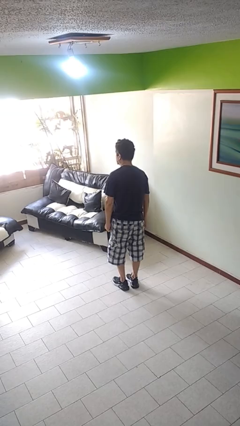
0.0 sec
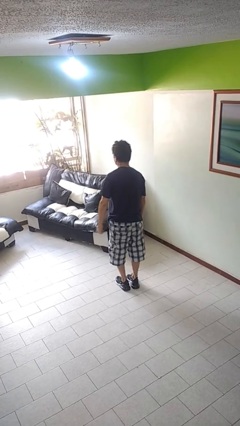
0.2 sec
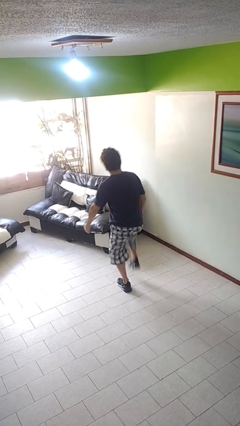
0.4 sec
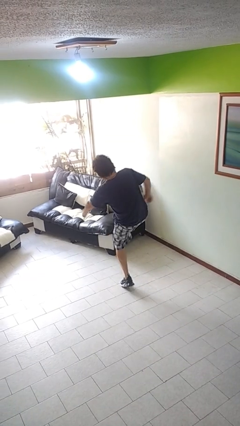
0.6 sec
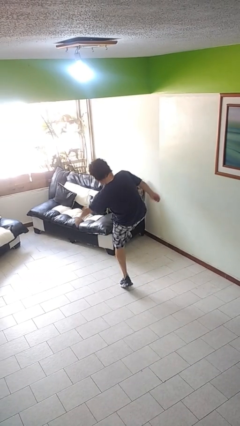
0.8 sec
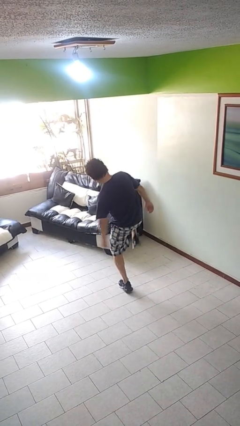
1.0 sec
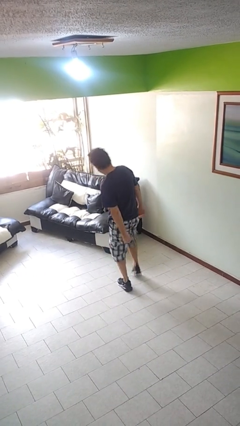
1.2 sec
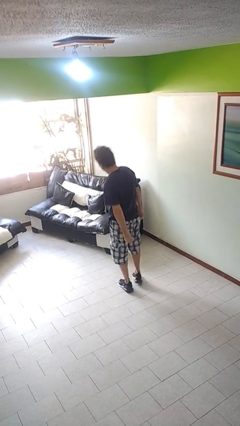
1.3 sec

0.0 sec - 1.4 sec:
person karate kicks

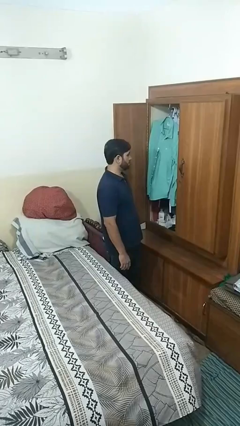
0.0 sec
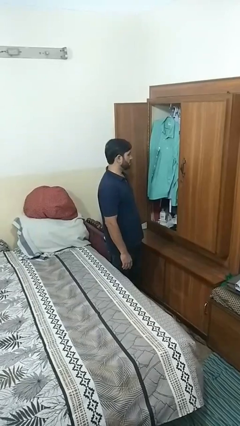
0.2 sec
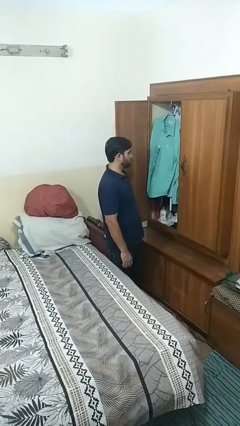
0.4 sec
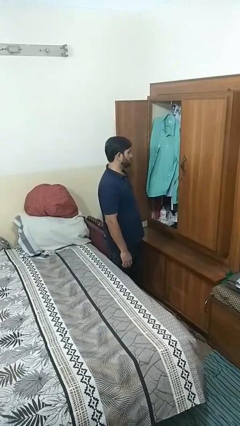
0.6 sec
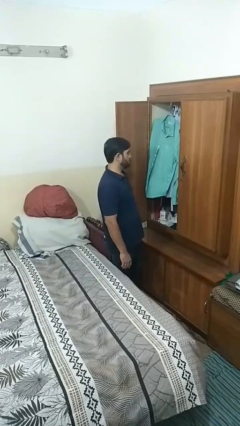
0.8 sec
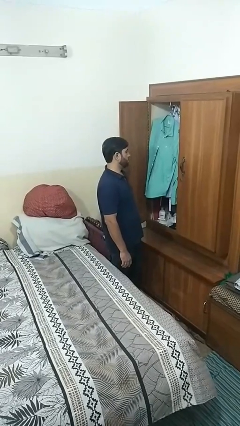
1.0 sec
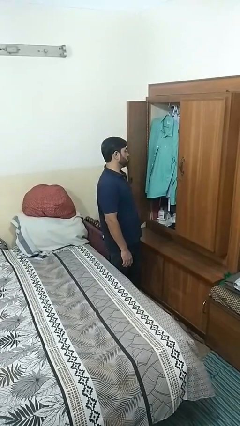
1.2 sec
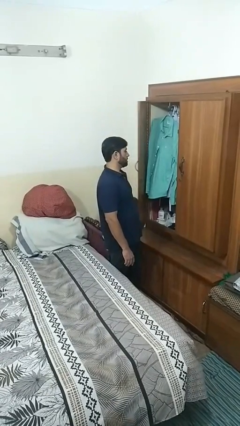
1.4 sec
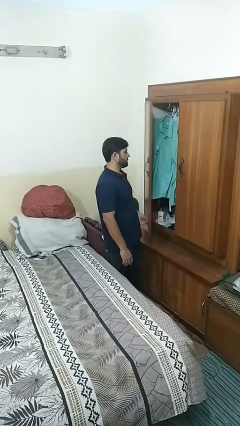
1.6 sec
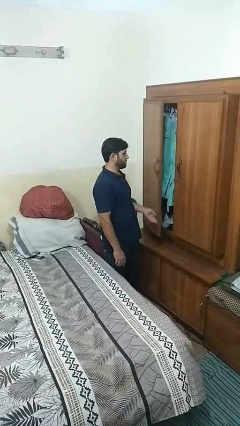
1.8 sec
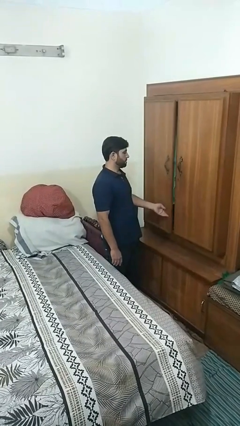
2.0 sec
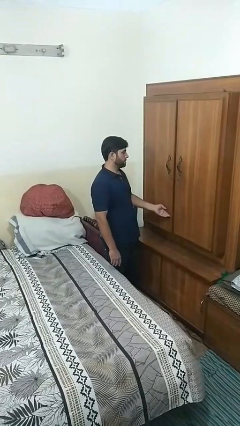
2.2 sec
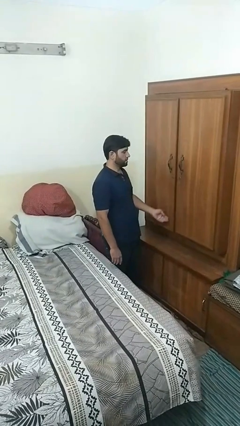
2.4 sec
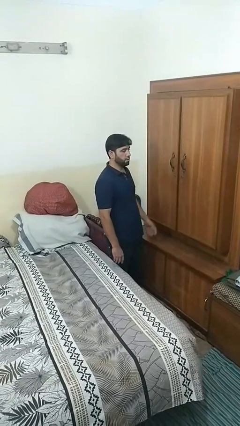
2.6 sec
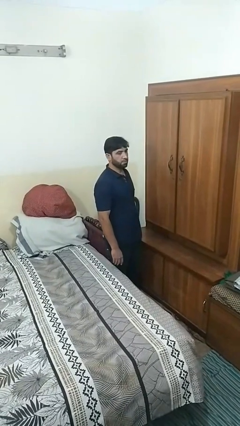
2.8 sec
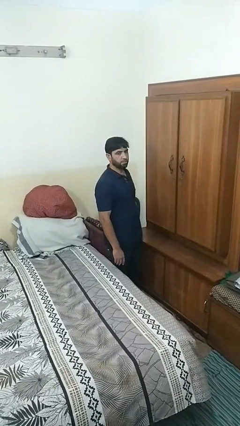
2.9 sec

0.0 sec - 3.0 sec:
person closes closet door

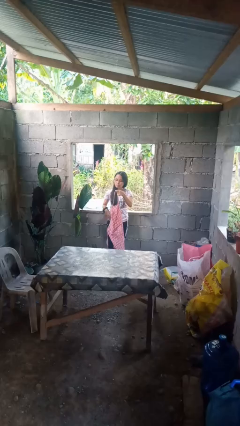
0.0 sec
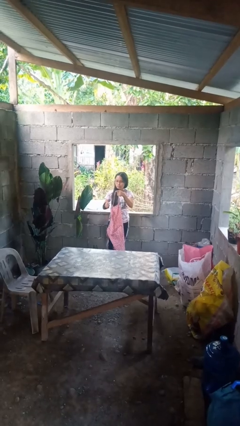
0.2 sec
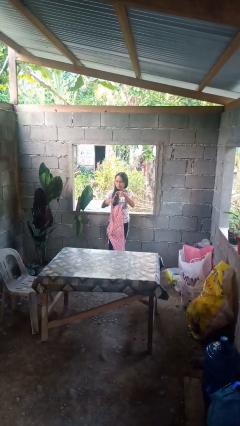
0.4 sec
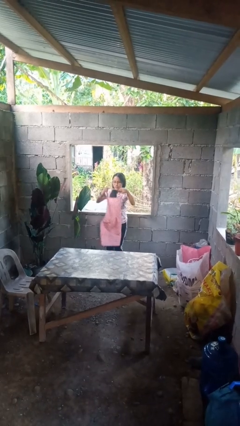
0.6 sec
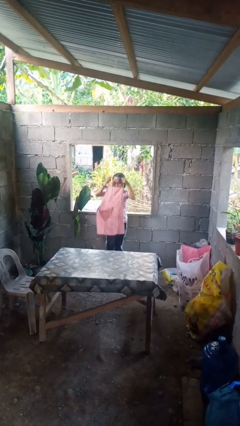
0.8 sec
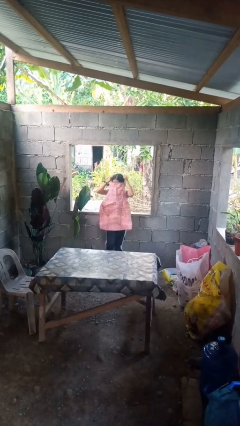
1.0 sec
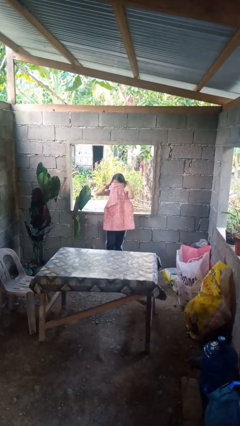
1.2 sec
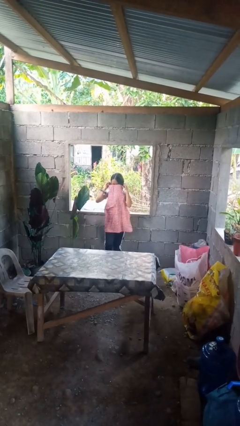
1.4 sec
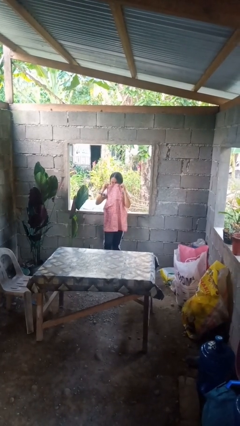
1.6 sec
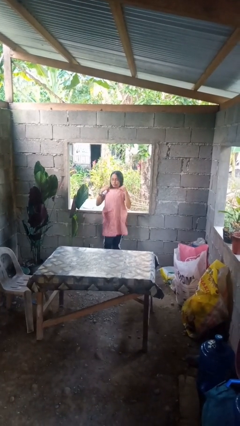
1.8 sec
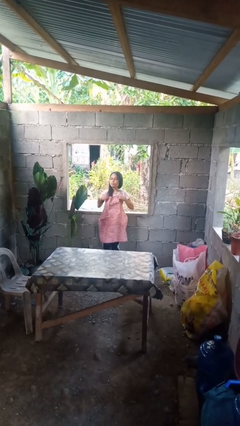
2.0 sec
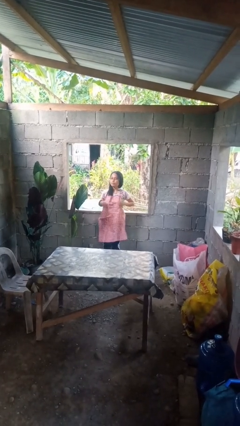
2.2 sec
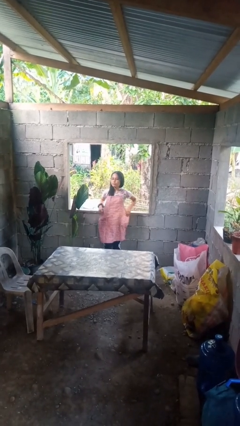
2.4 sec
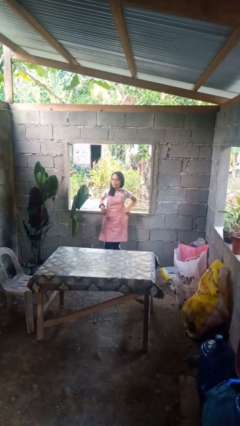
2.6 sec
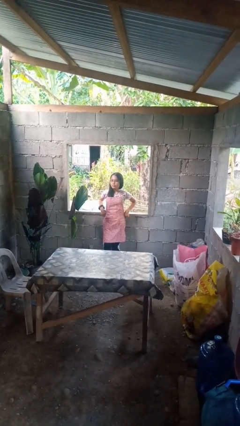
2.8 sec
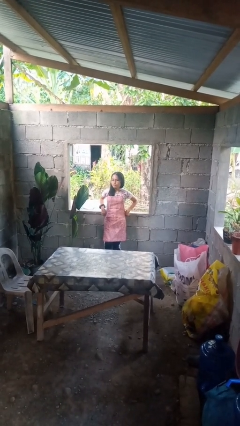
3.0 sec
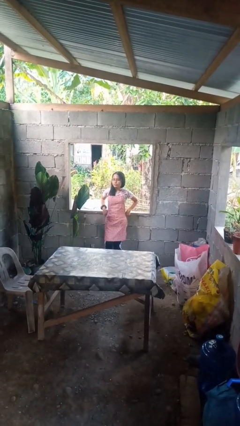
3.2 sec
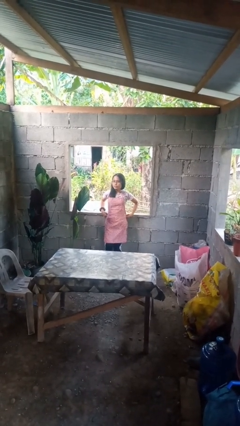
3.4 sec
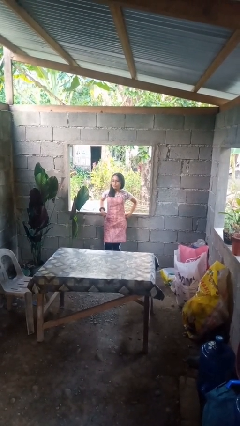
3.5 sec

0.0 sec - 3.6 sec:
person puts on apron

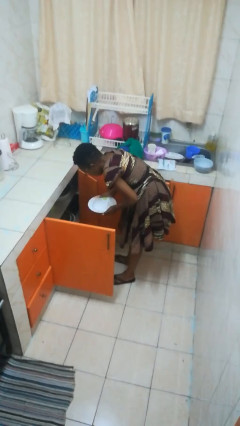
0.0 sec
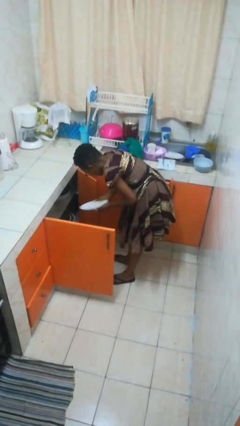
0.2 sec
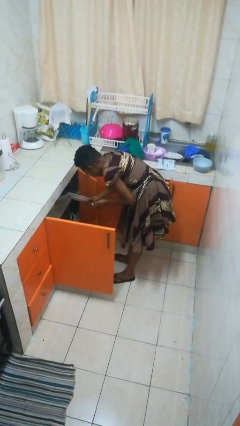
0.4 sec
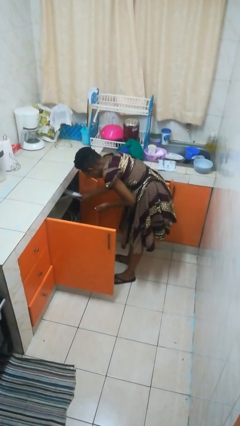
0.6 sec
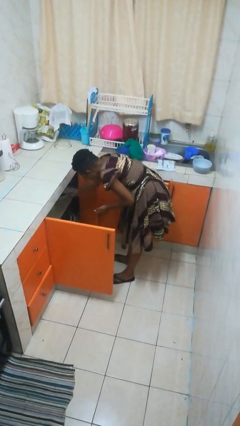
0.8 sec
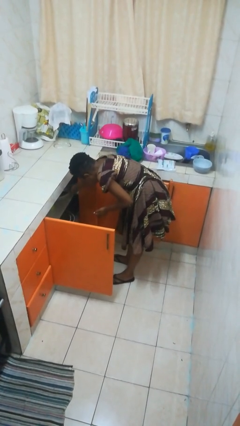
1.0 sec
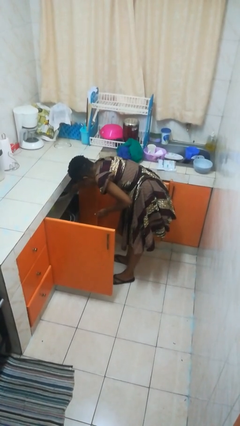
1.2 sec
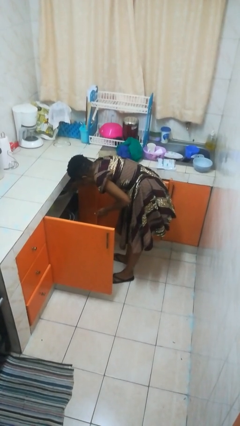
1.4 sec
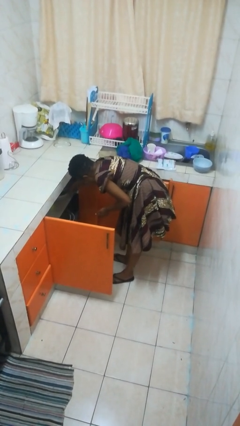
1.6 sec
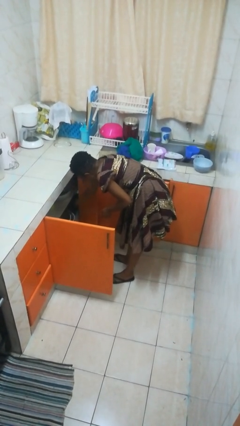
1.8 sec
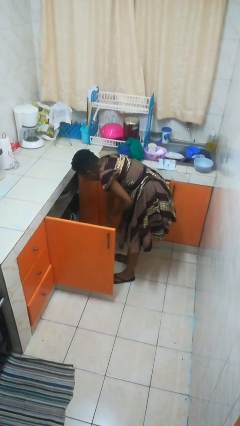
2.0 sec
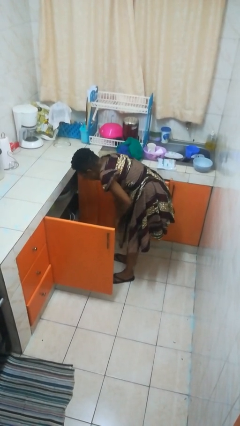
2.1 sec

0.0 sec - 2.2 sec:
person puts object in cabinet

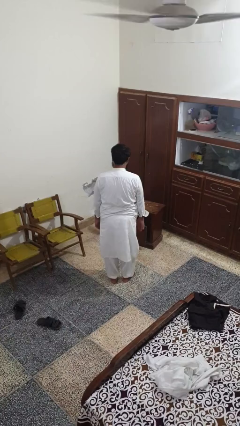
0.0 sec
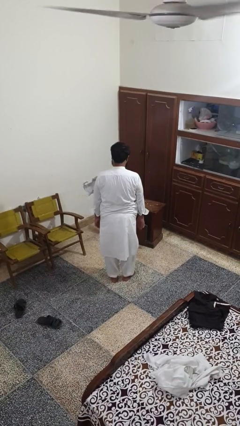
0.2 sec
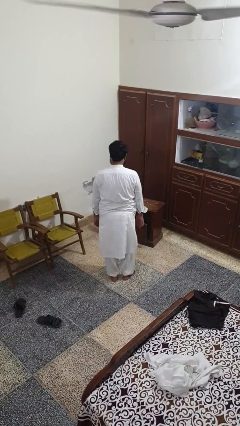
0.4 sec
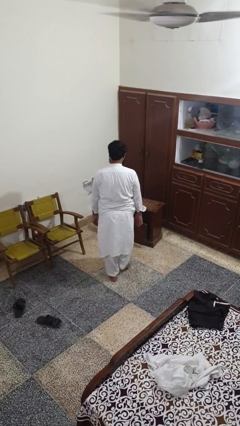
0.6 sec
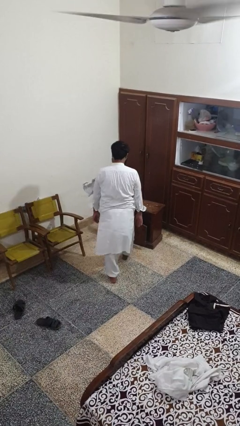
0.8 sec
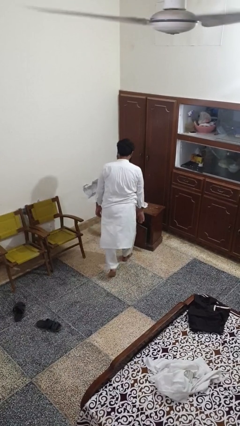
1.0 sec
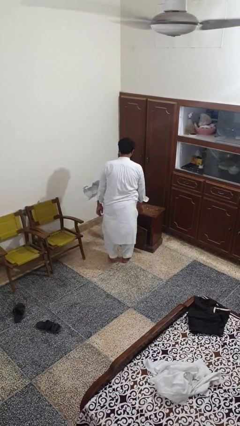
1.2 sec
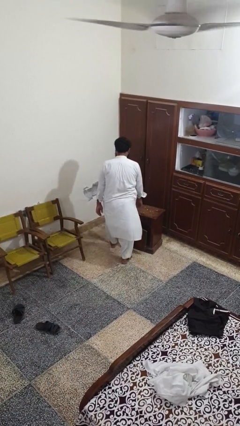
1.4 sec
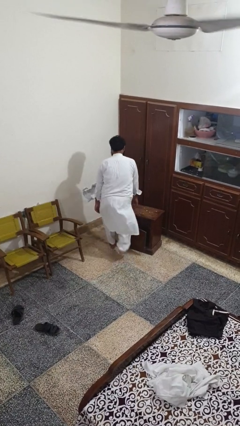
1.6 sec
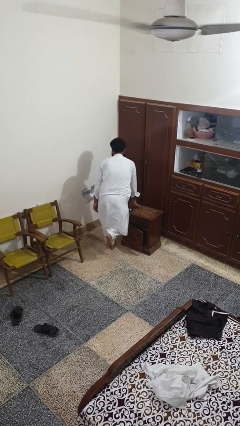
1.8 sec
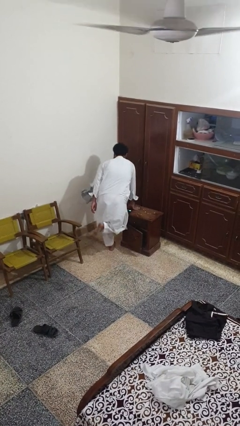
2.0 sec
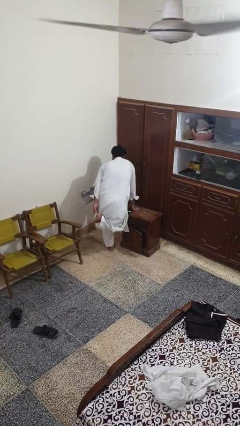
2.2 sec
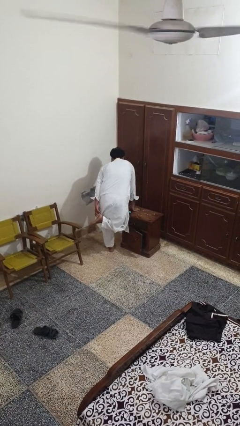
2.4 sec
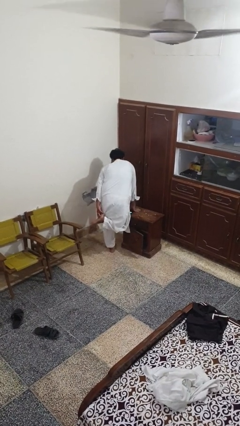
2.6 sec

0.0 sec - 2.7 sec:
person stubs toe

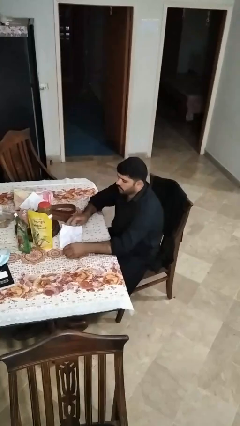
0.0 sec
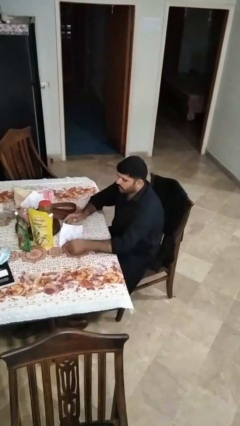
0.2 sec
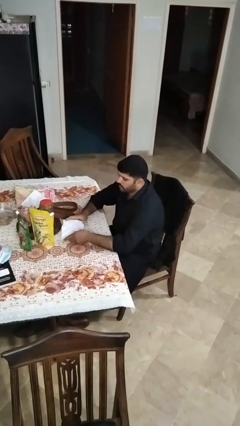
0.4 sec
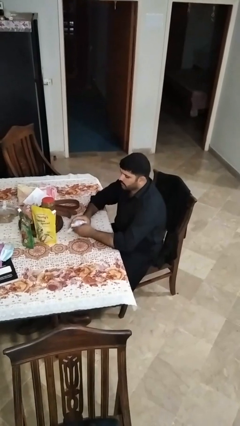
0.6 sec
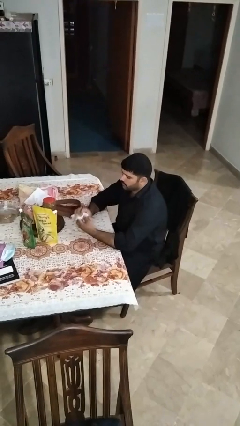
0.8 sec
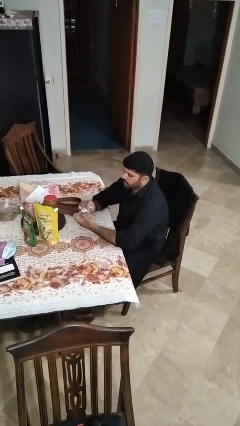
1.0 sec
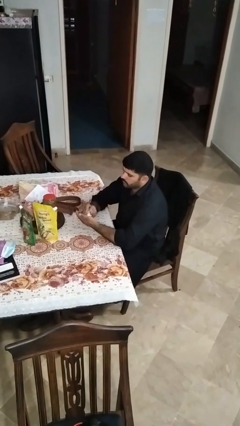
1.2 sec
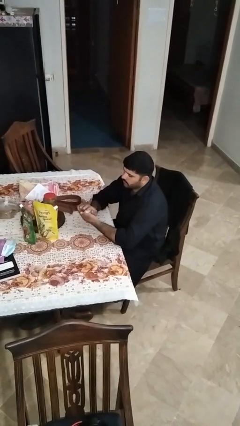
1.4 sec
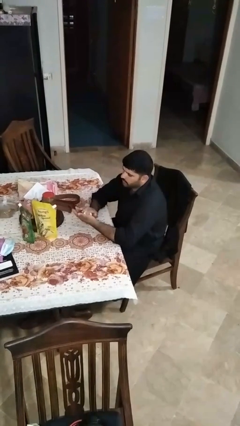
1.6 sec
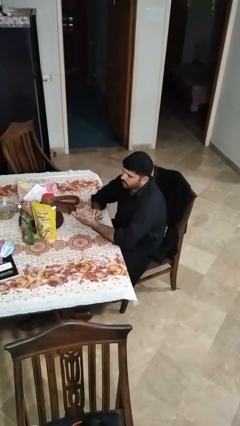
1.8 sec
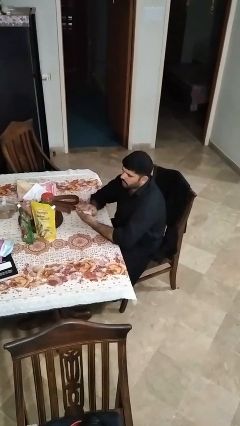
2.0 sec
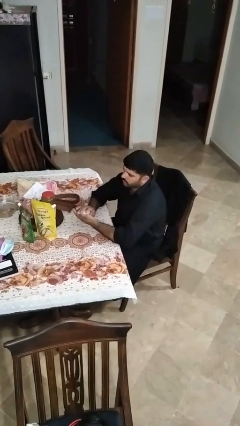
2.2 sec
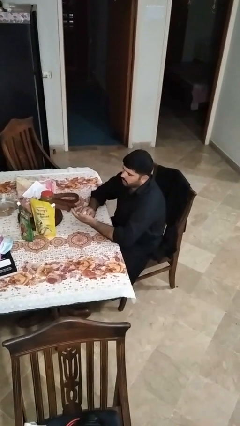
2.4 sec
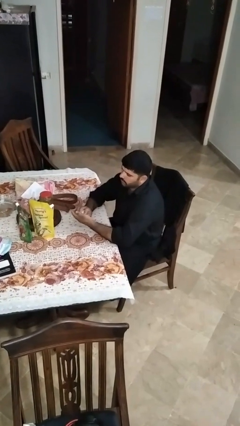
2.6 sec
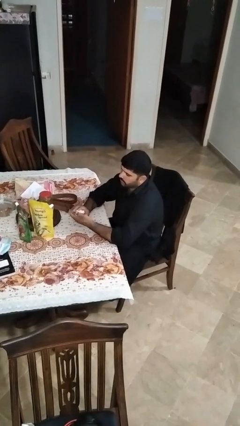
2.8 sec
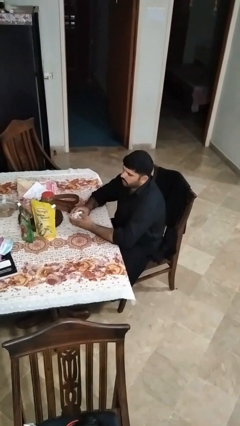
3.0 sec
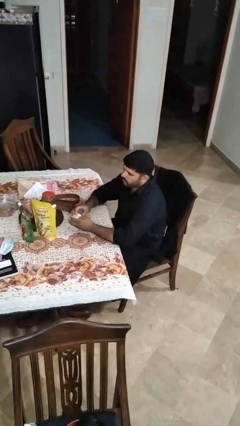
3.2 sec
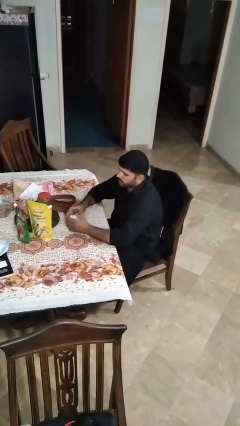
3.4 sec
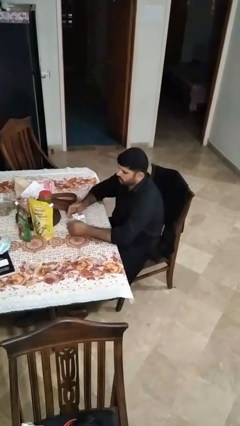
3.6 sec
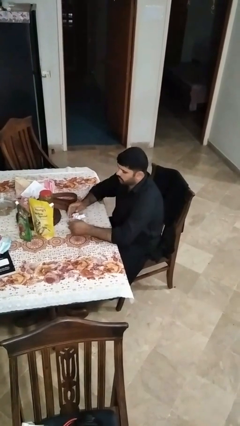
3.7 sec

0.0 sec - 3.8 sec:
person crumples paper

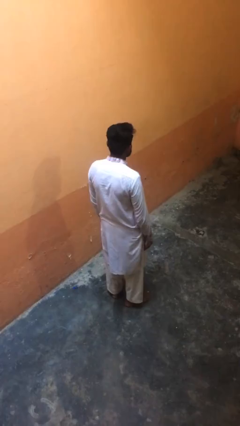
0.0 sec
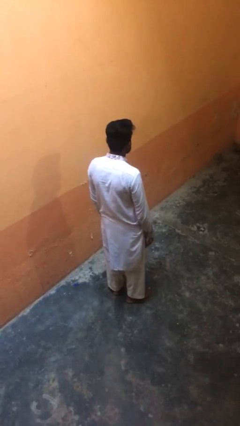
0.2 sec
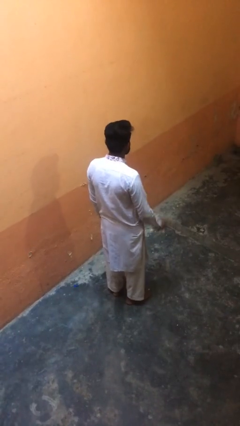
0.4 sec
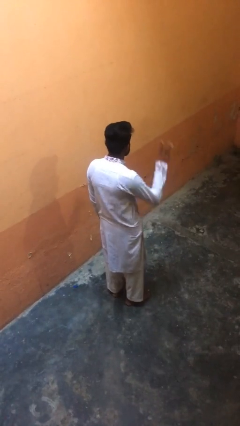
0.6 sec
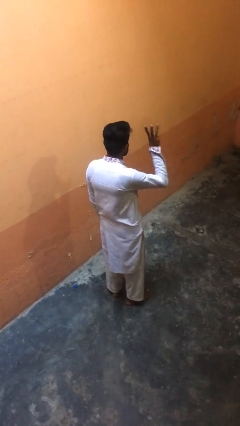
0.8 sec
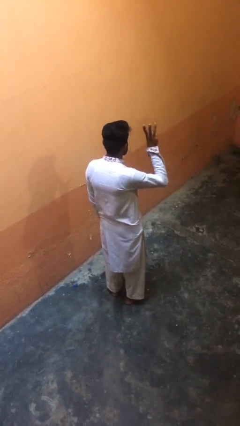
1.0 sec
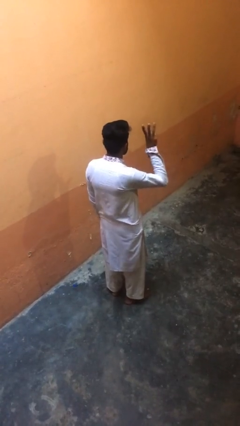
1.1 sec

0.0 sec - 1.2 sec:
person gestures number three
